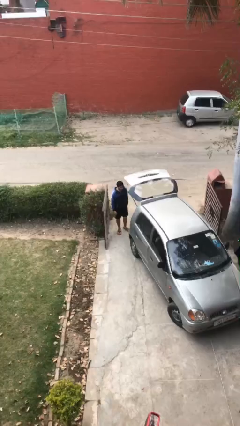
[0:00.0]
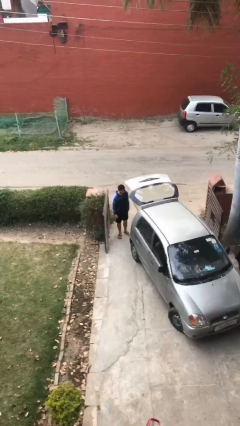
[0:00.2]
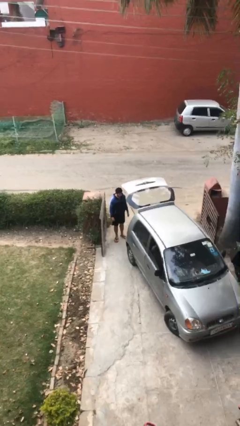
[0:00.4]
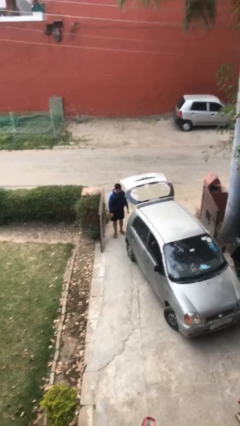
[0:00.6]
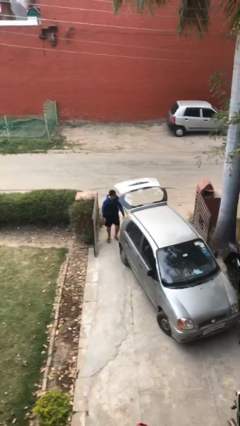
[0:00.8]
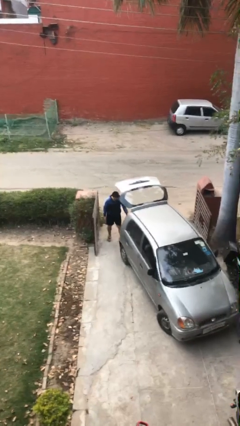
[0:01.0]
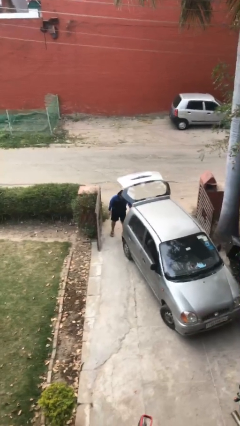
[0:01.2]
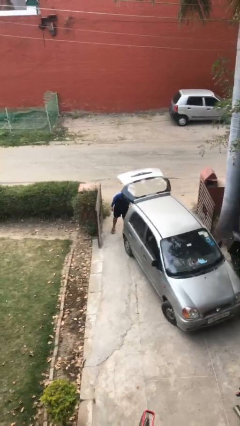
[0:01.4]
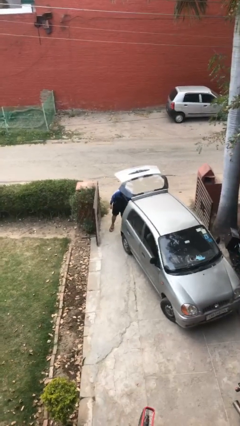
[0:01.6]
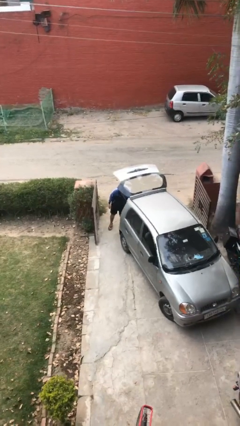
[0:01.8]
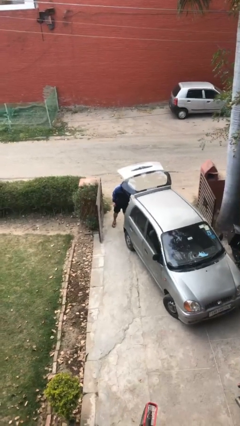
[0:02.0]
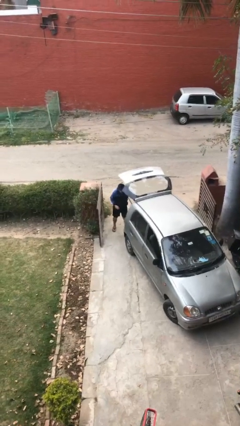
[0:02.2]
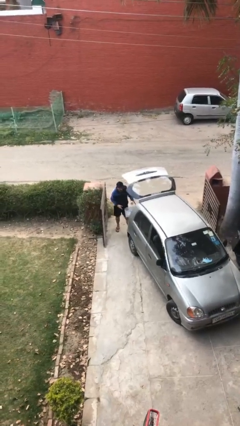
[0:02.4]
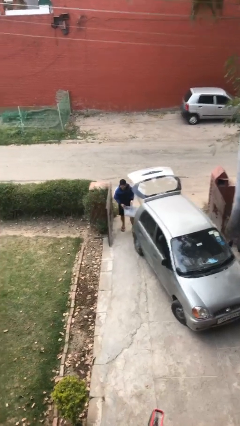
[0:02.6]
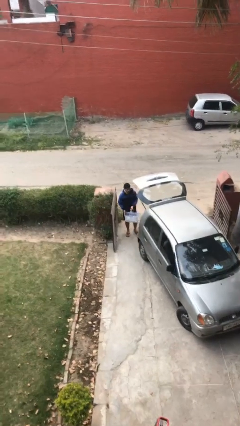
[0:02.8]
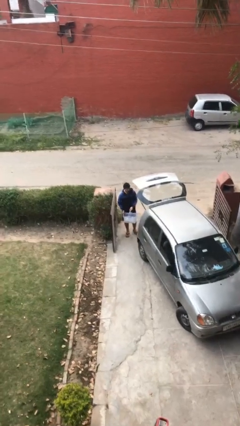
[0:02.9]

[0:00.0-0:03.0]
person unloads car

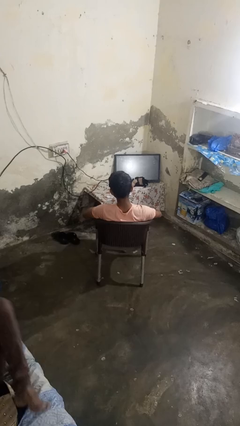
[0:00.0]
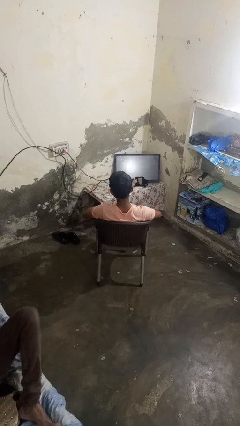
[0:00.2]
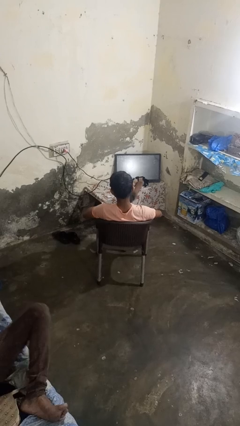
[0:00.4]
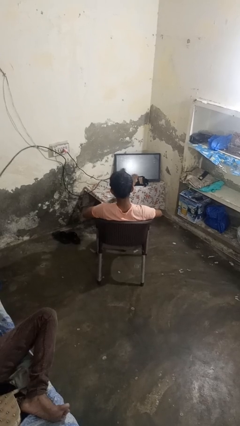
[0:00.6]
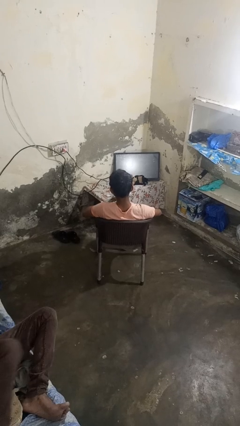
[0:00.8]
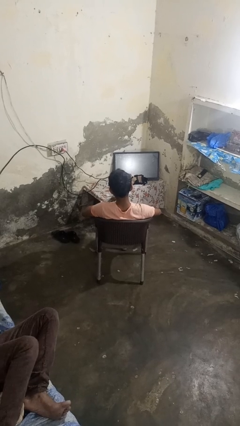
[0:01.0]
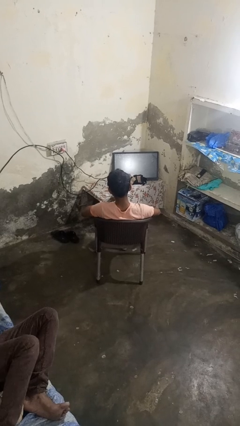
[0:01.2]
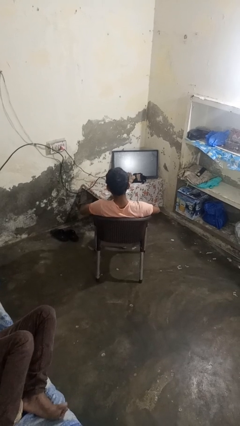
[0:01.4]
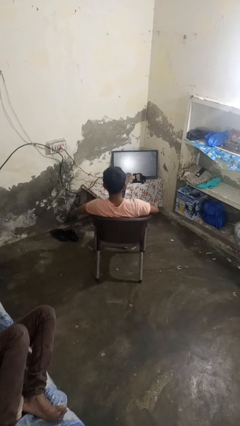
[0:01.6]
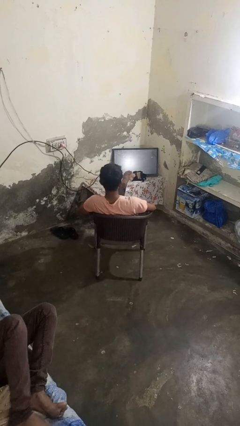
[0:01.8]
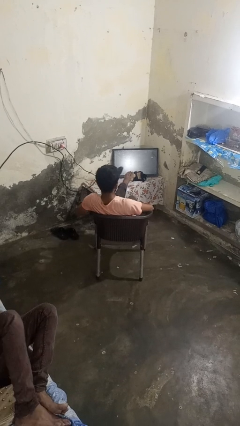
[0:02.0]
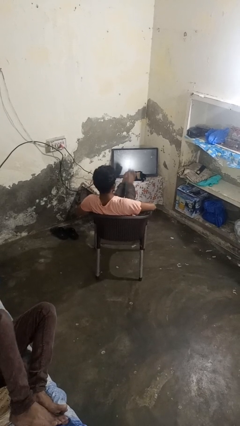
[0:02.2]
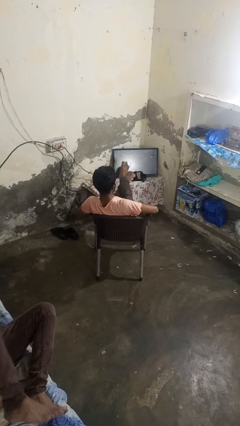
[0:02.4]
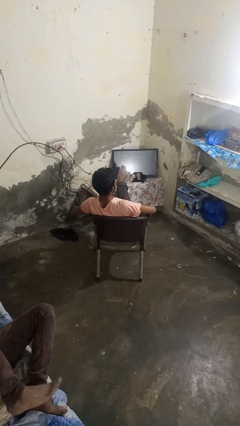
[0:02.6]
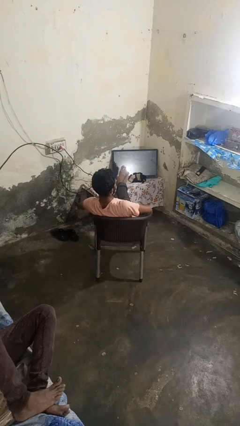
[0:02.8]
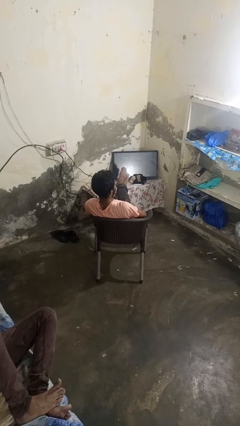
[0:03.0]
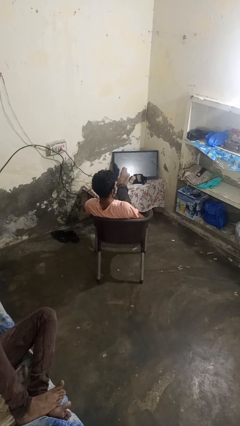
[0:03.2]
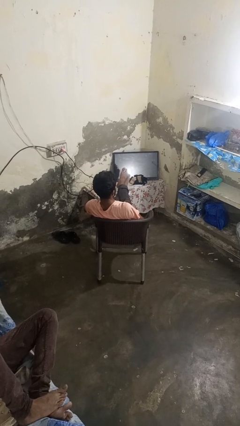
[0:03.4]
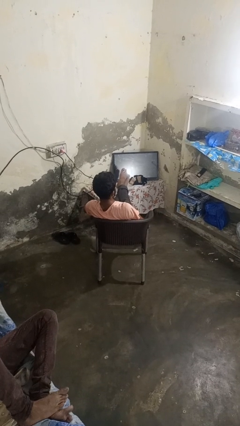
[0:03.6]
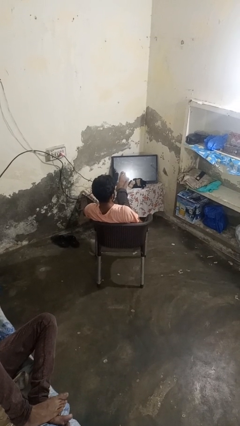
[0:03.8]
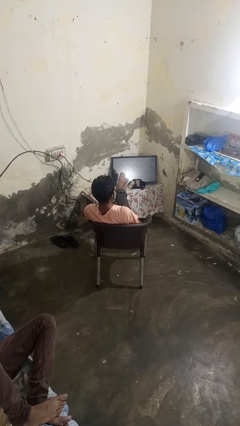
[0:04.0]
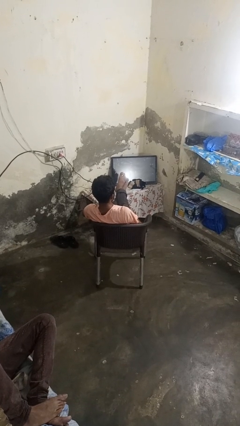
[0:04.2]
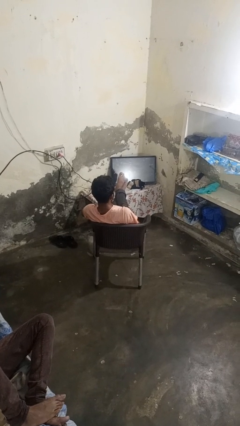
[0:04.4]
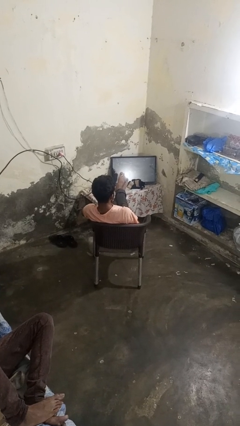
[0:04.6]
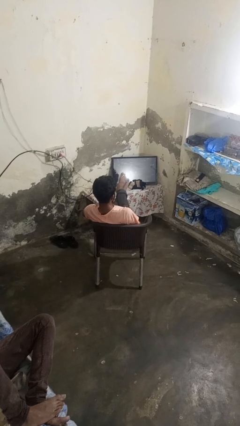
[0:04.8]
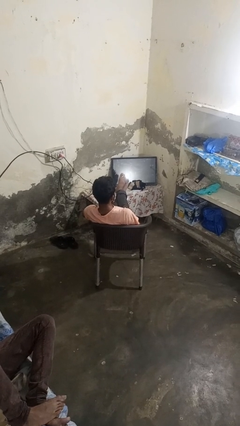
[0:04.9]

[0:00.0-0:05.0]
person puts feet up

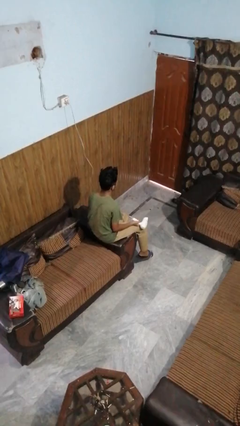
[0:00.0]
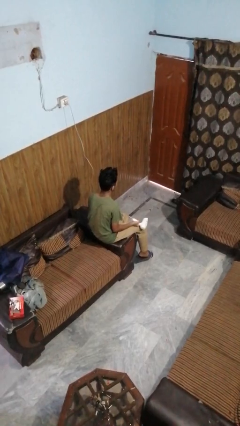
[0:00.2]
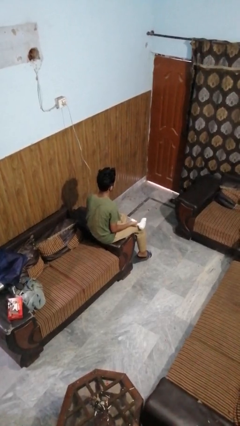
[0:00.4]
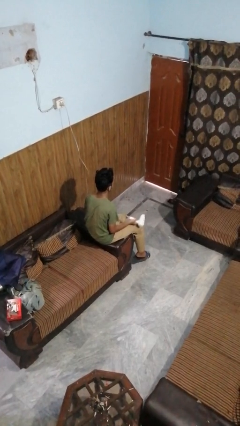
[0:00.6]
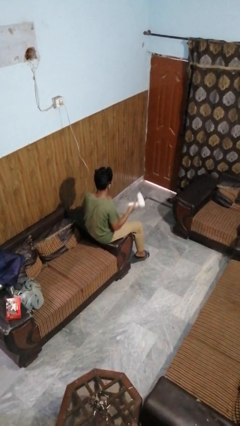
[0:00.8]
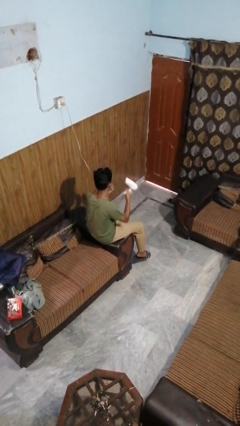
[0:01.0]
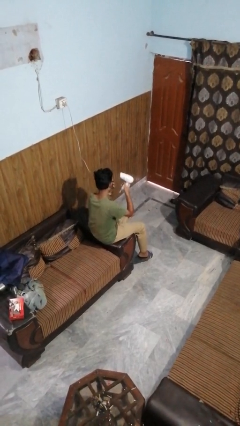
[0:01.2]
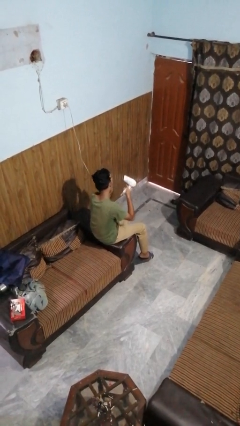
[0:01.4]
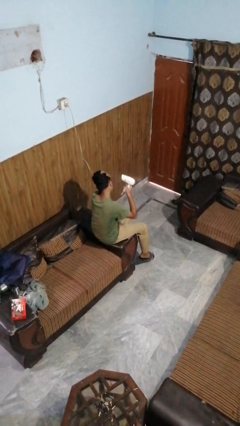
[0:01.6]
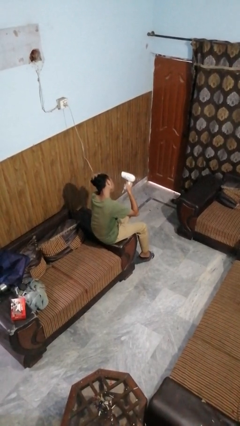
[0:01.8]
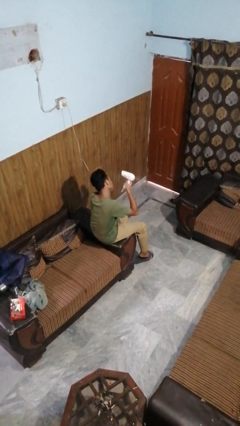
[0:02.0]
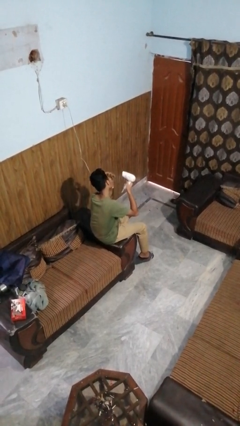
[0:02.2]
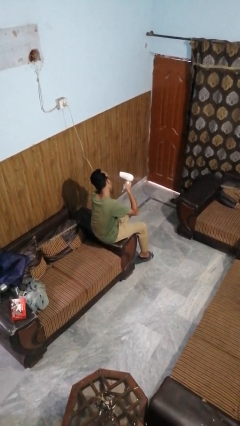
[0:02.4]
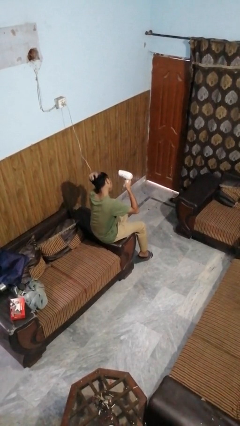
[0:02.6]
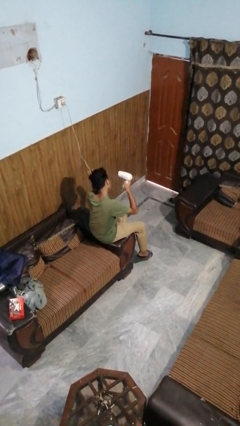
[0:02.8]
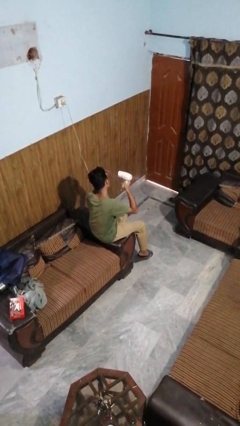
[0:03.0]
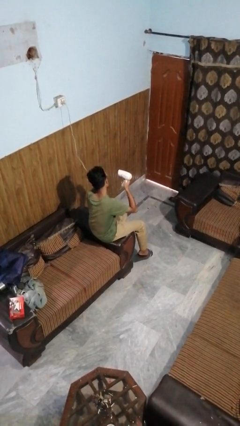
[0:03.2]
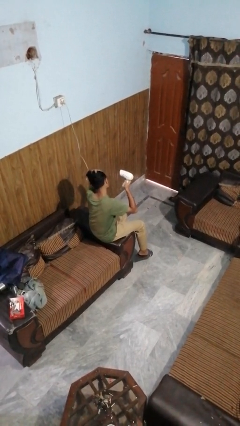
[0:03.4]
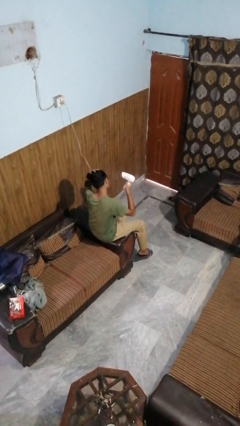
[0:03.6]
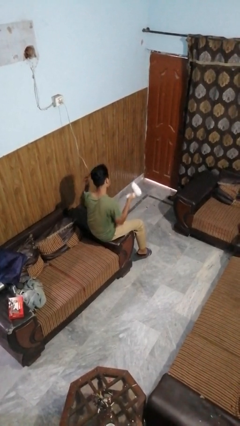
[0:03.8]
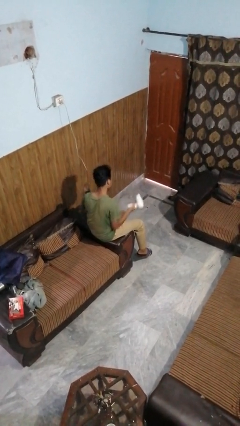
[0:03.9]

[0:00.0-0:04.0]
person dries hair with hairdryer

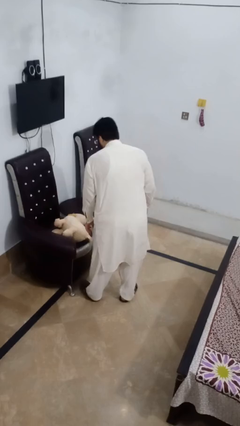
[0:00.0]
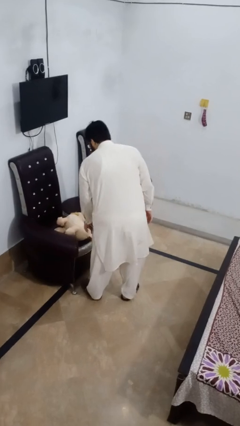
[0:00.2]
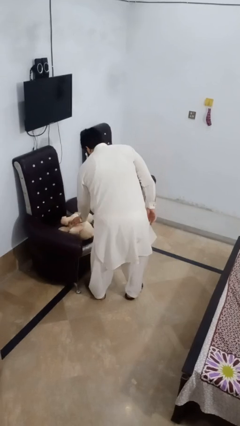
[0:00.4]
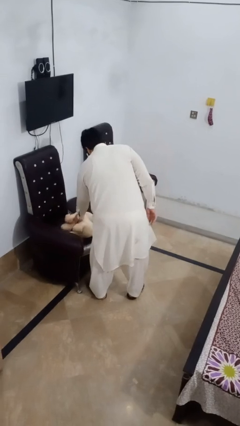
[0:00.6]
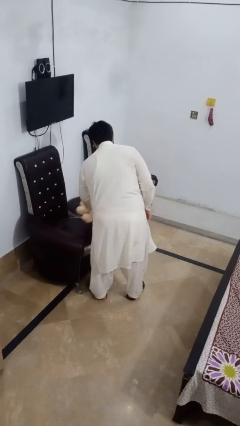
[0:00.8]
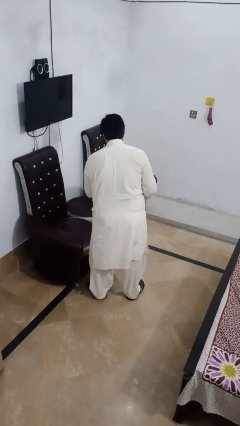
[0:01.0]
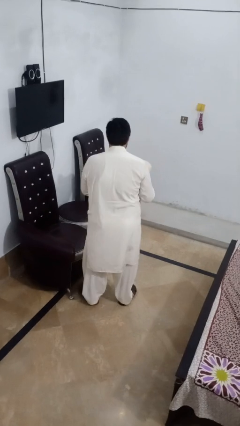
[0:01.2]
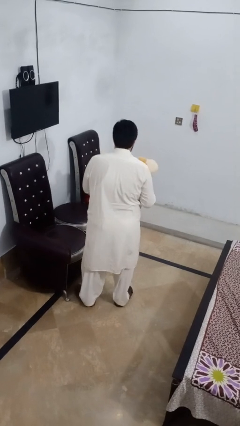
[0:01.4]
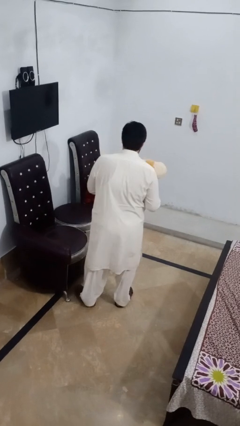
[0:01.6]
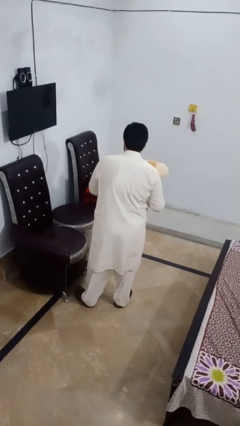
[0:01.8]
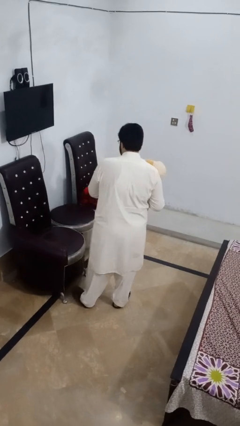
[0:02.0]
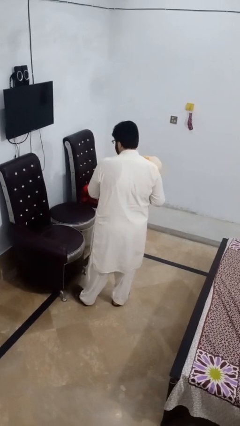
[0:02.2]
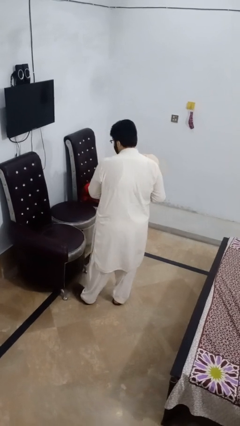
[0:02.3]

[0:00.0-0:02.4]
person picks up object from couch

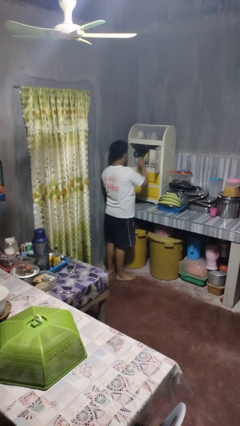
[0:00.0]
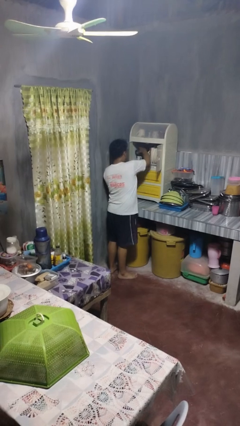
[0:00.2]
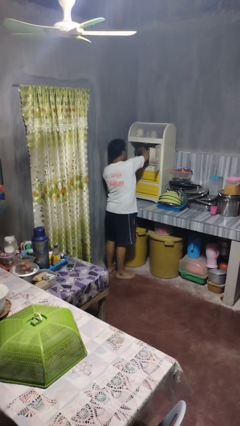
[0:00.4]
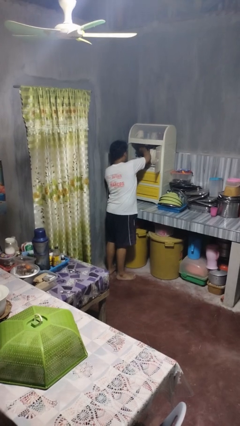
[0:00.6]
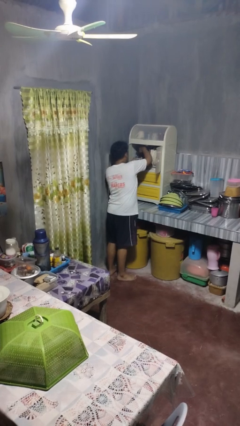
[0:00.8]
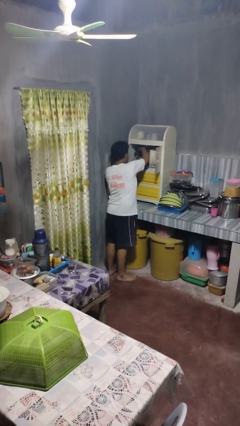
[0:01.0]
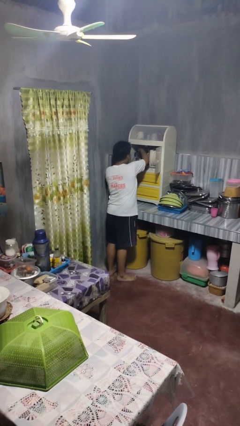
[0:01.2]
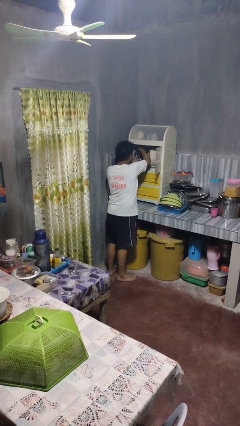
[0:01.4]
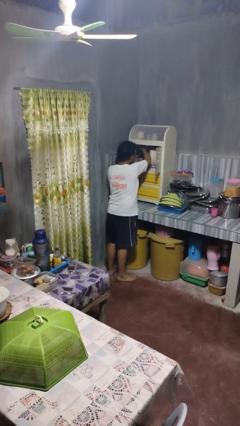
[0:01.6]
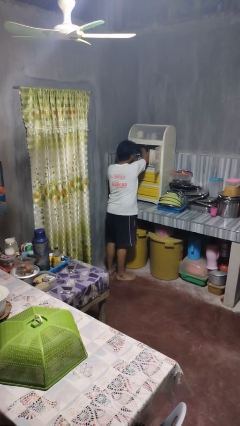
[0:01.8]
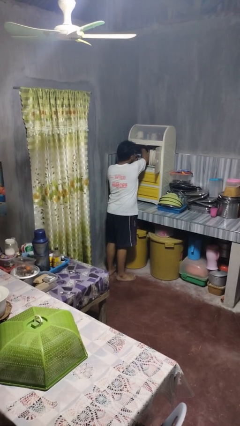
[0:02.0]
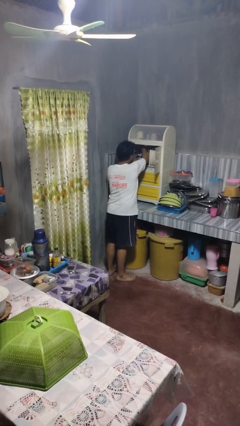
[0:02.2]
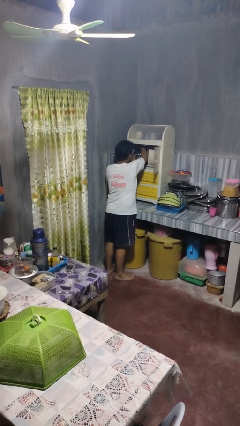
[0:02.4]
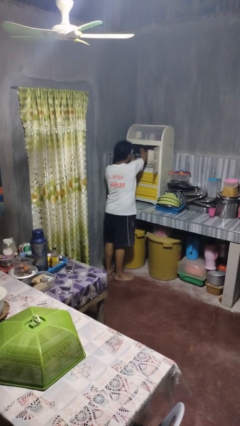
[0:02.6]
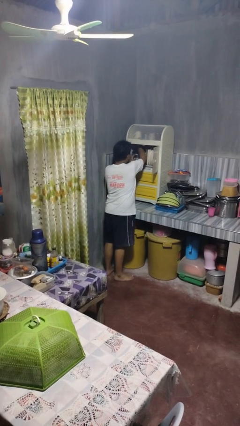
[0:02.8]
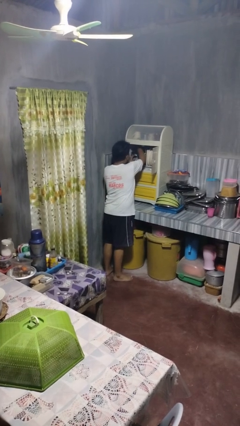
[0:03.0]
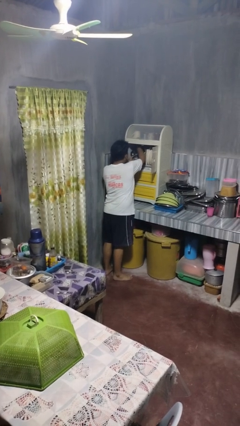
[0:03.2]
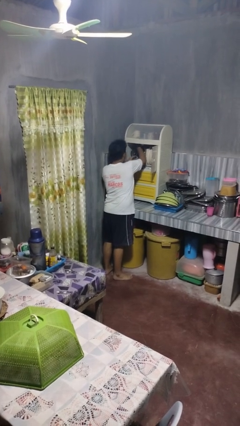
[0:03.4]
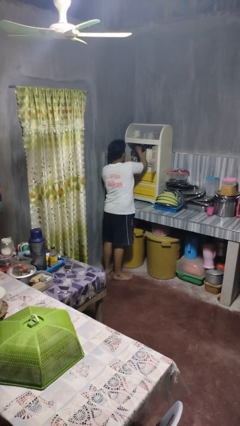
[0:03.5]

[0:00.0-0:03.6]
person searches in cabinet
